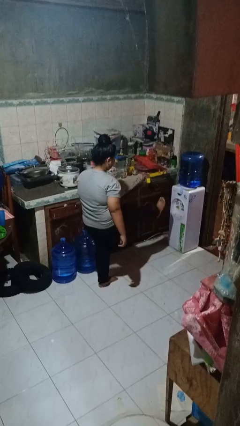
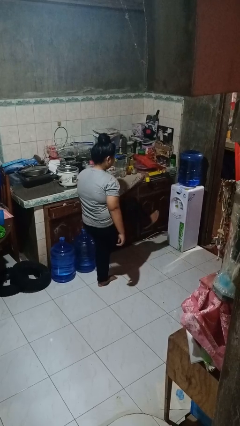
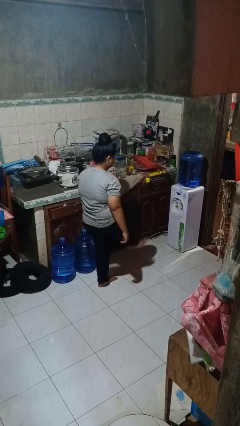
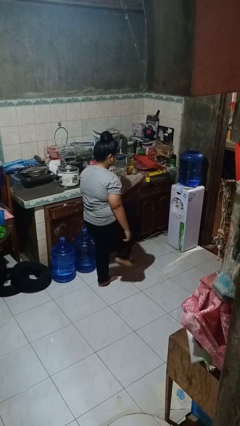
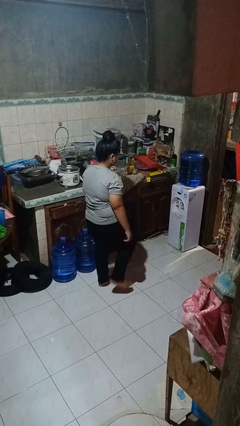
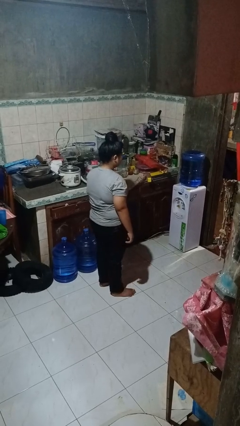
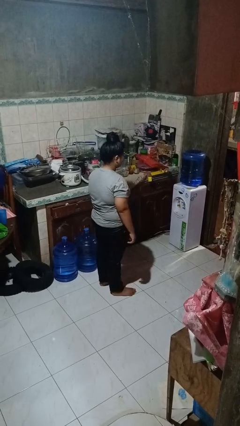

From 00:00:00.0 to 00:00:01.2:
person karate kicks

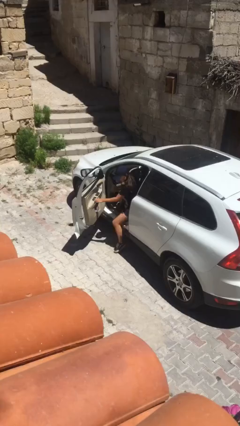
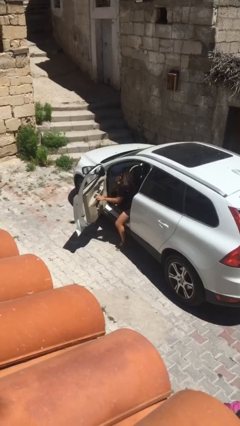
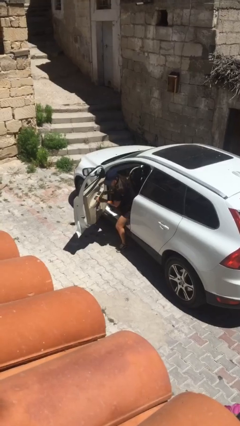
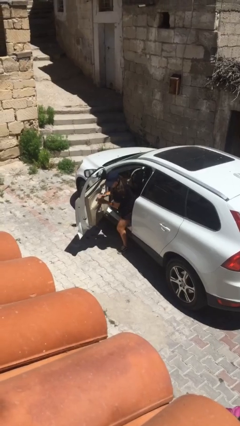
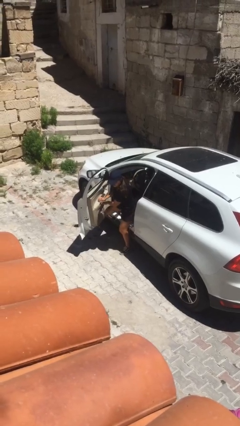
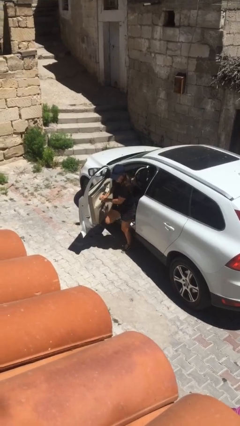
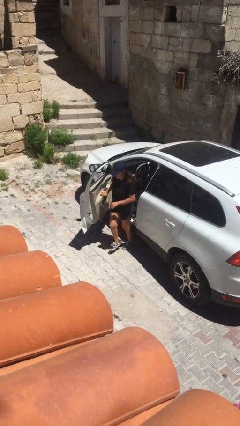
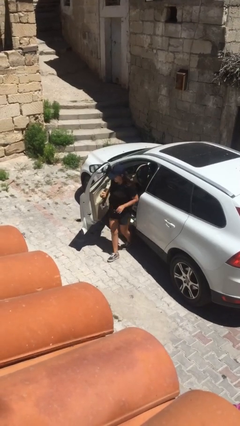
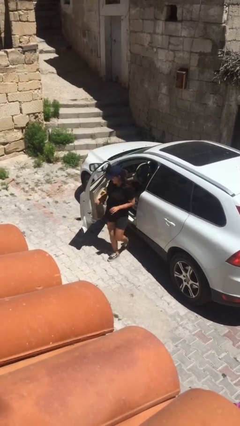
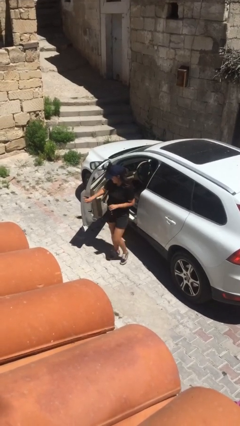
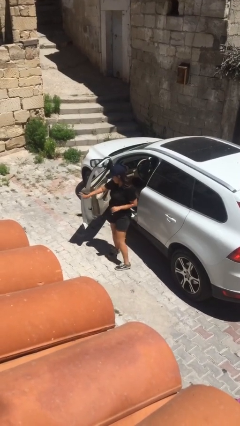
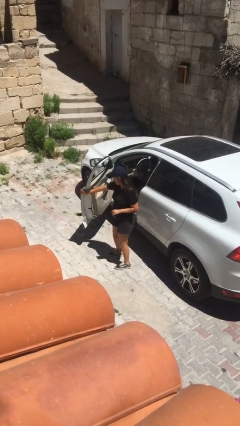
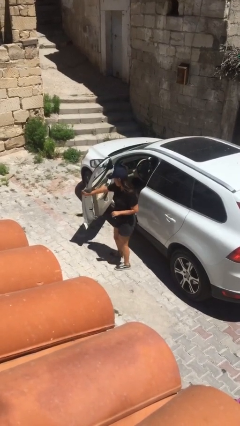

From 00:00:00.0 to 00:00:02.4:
person exits car

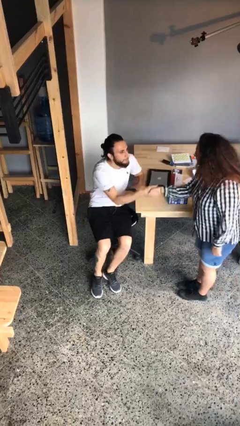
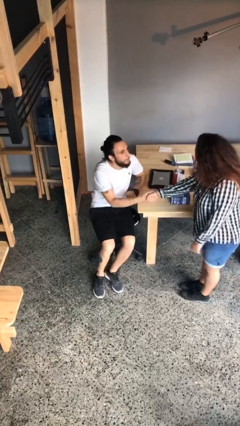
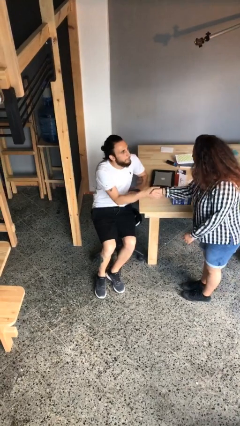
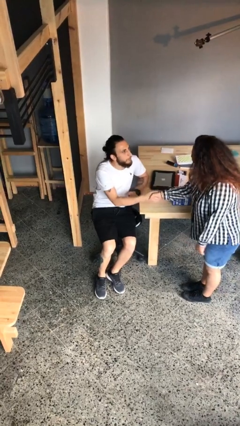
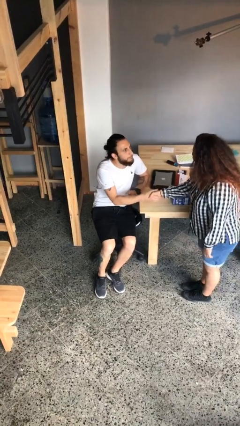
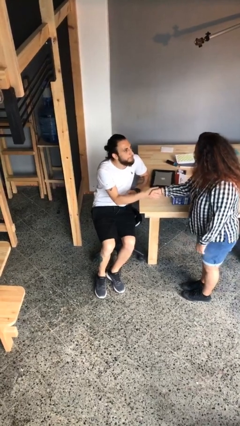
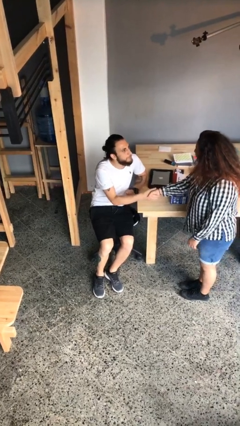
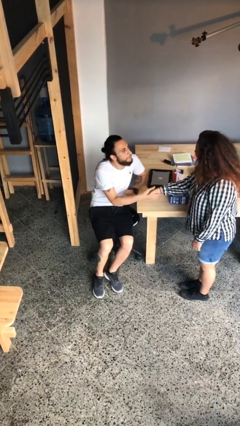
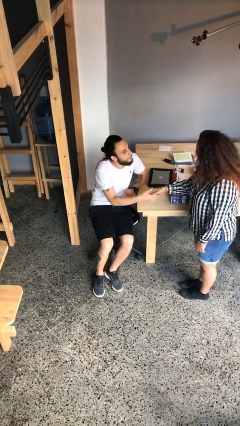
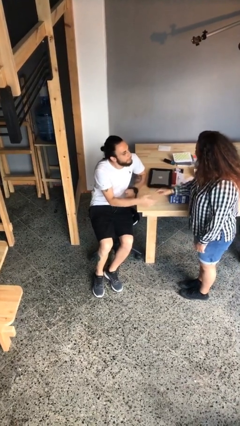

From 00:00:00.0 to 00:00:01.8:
person shakes hand

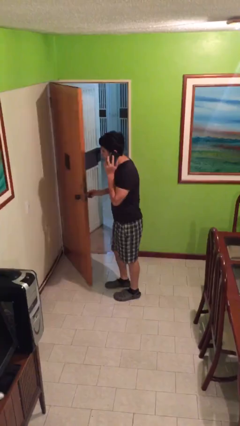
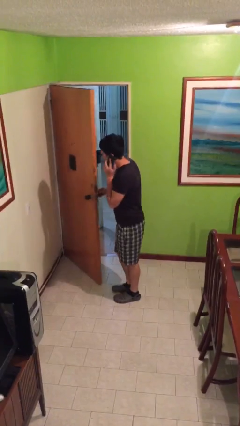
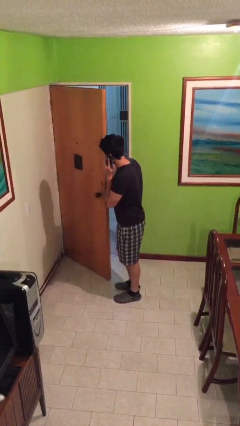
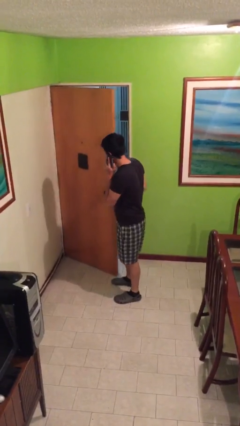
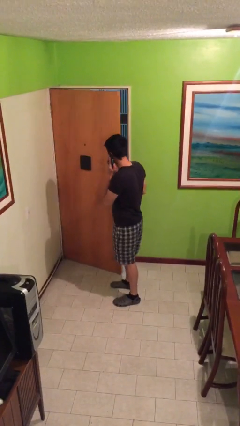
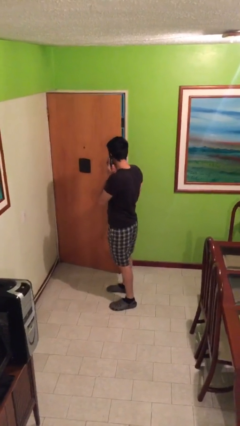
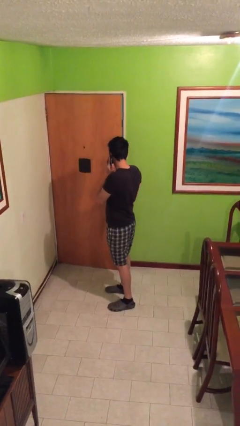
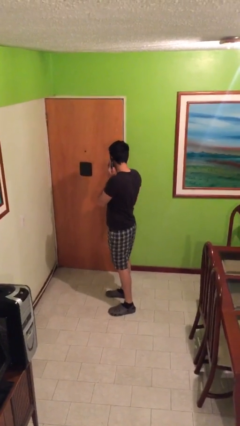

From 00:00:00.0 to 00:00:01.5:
person closes facility door

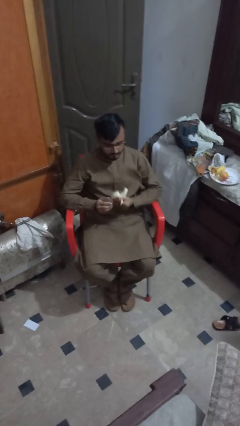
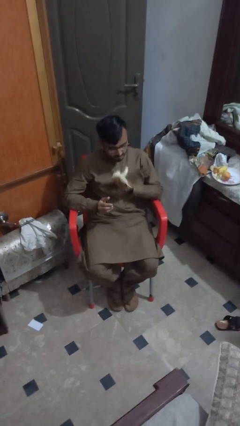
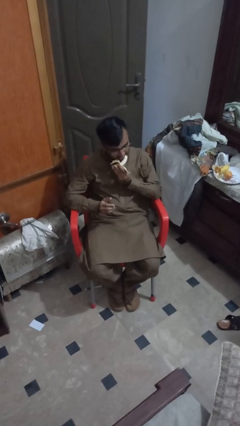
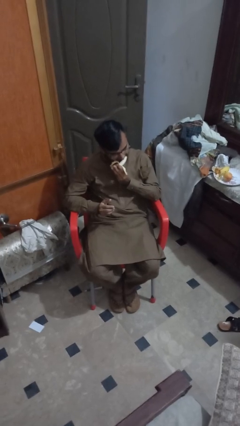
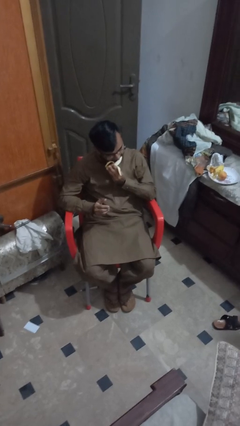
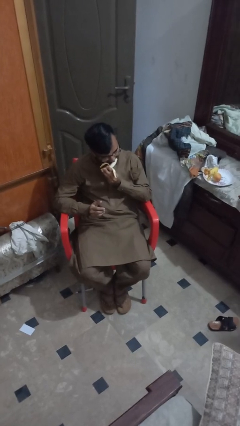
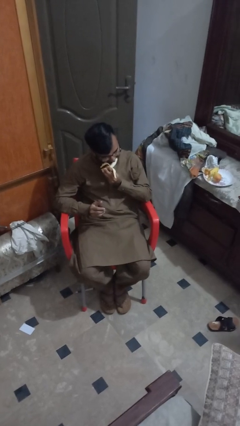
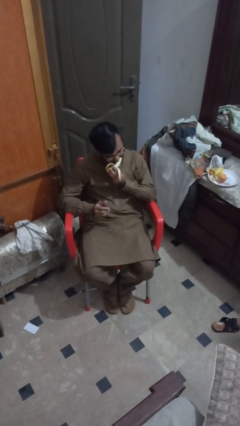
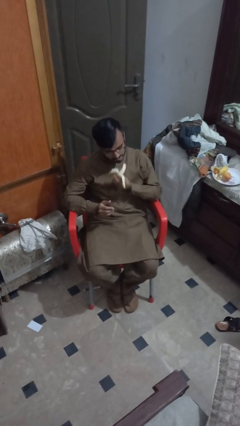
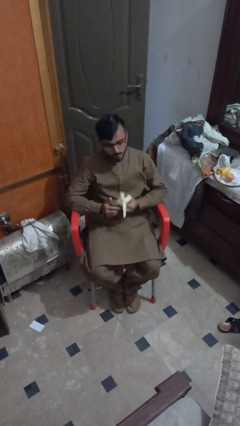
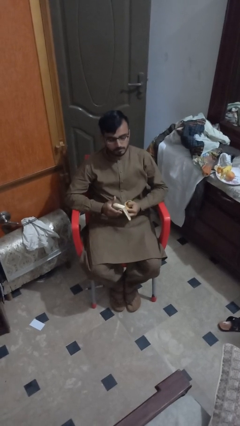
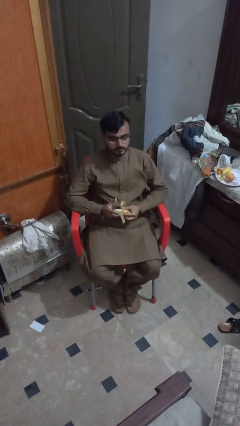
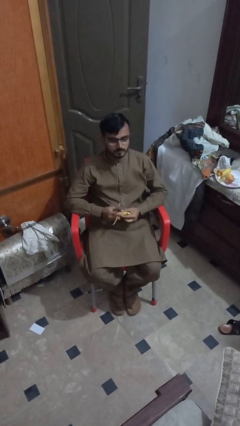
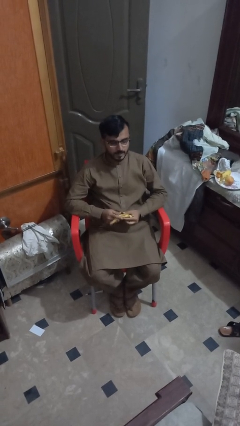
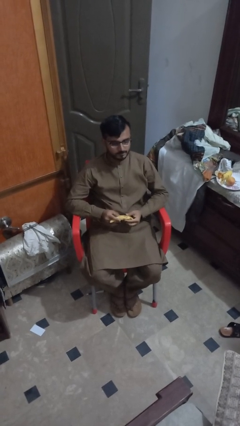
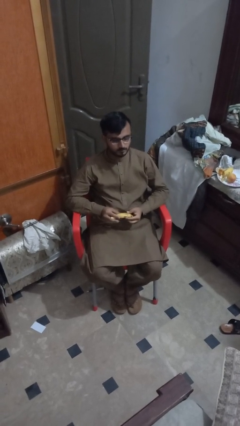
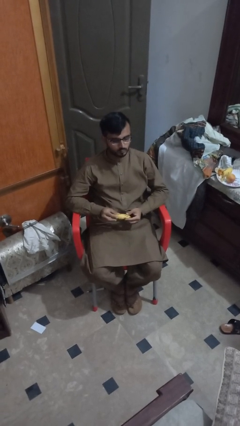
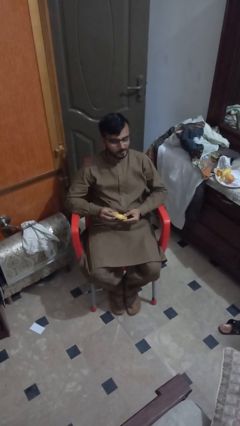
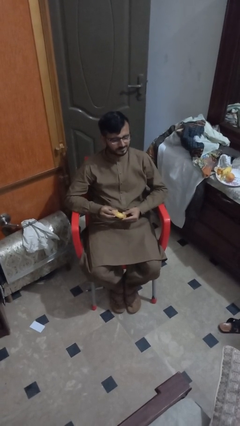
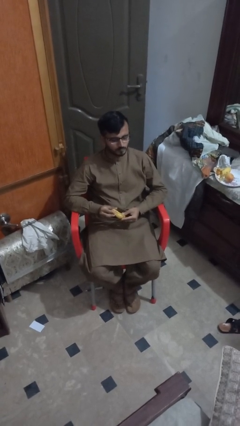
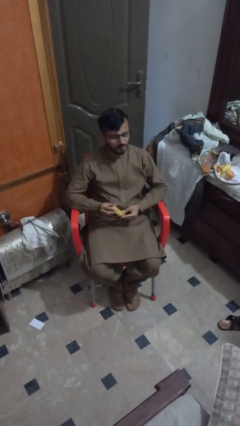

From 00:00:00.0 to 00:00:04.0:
person eats banana

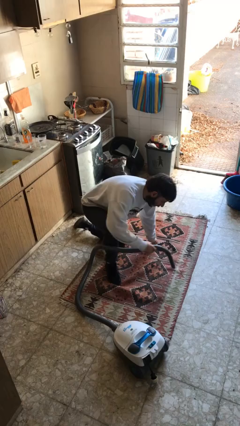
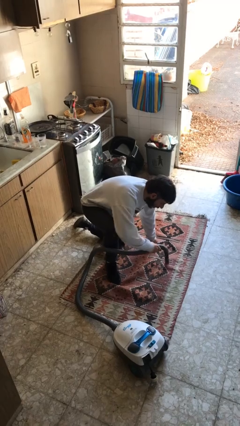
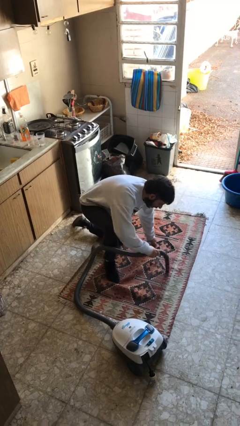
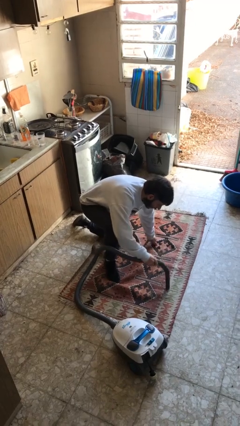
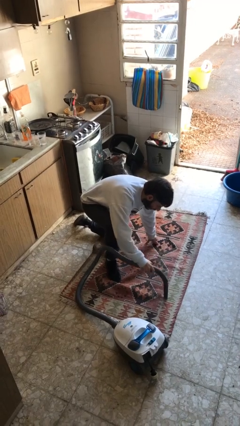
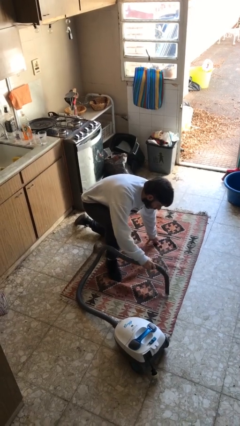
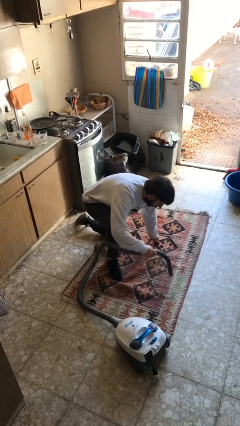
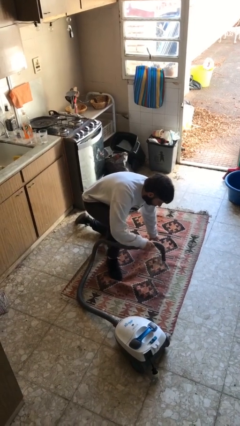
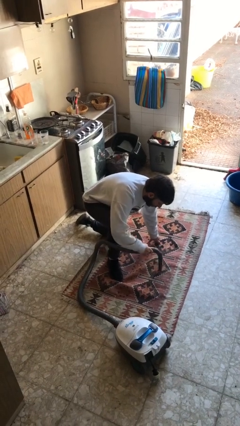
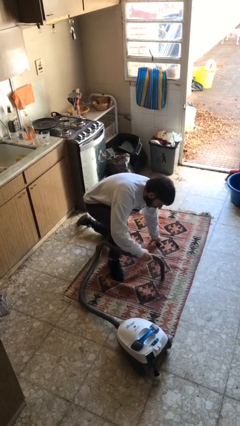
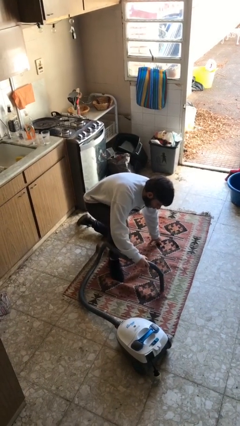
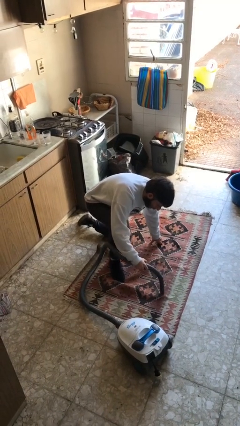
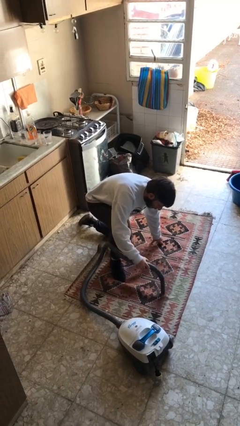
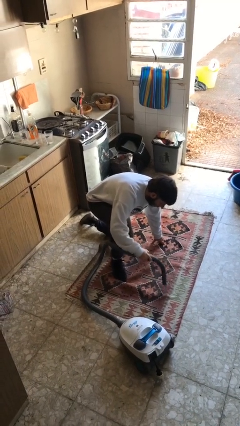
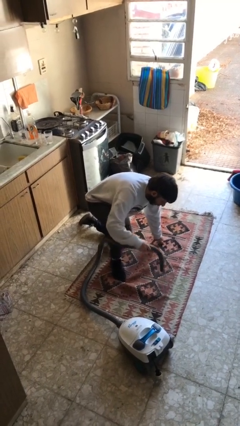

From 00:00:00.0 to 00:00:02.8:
person vacuums carpet

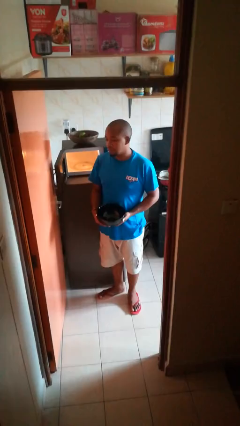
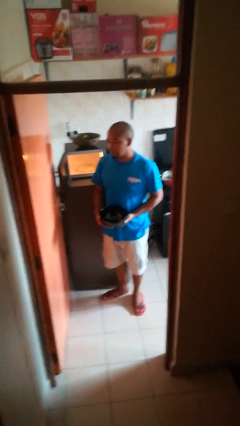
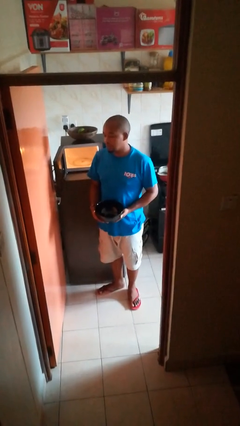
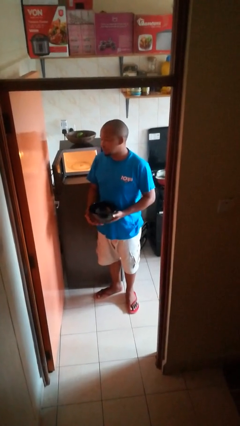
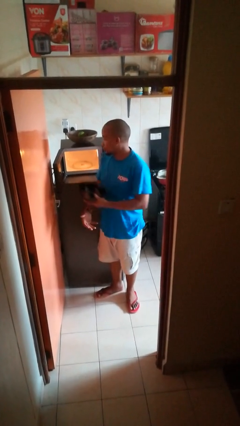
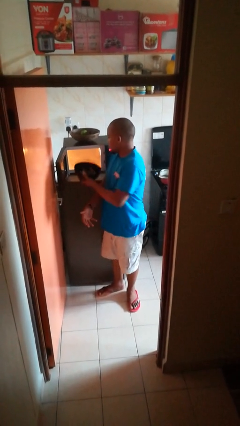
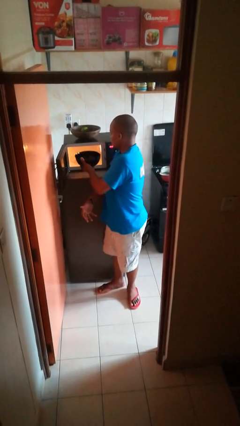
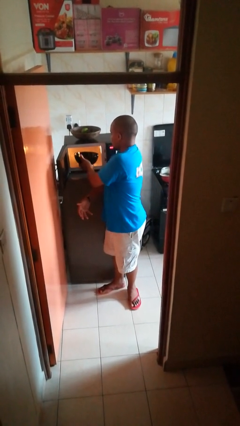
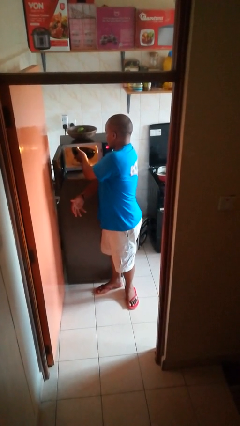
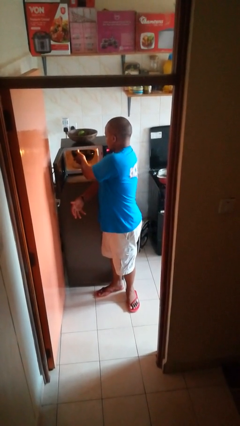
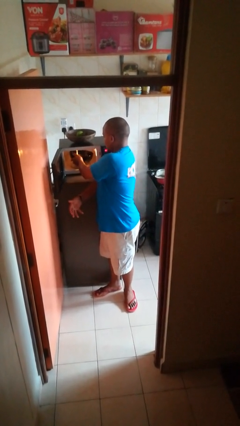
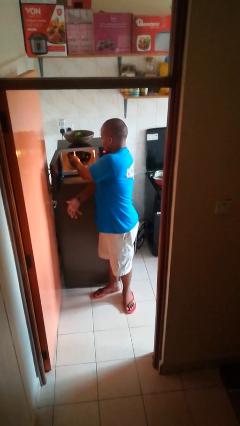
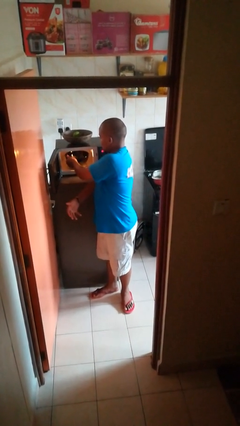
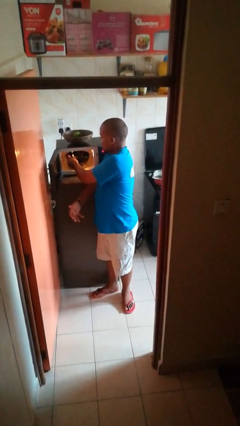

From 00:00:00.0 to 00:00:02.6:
person puts object into microwave

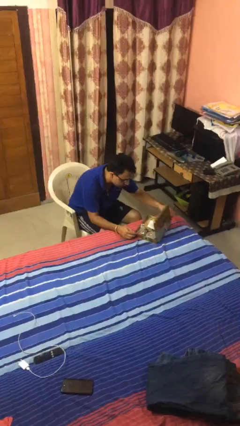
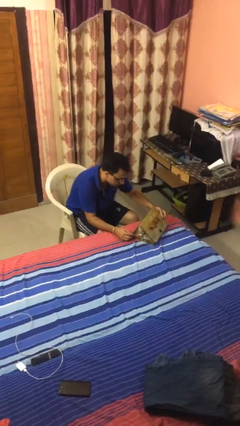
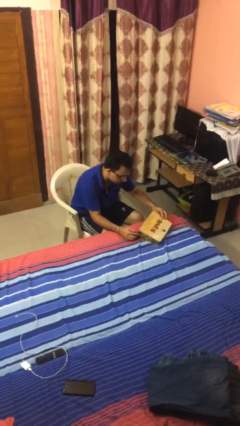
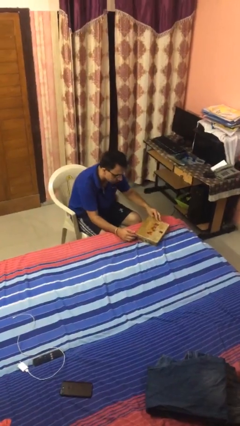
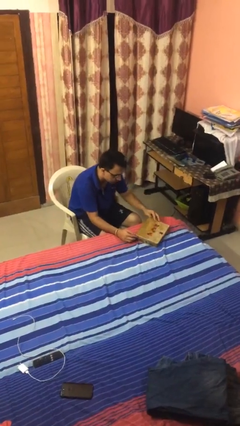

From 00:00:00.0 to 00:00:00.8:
person closes jewelry box
